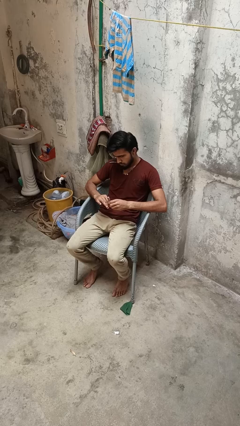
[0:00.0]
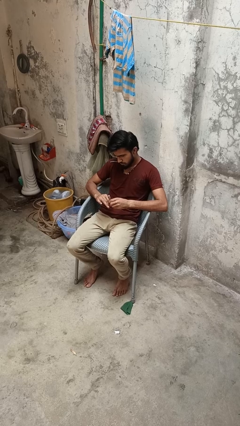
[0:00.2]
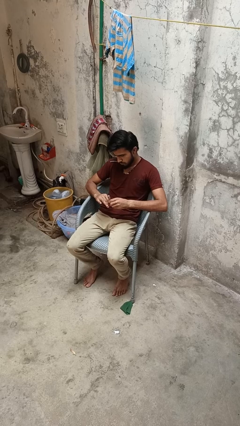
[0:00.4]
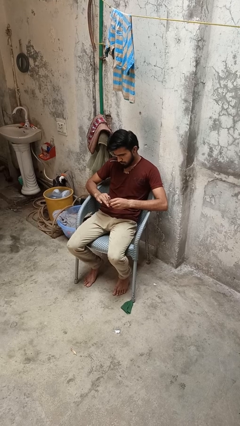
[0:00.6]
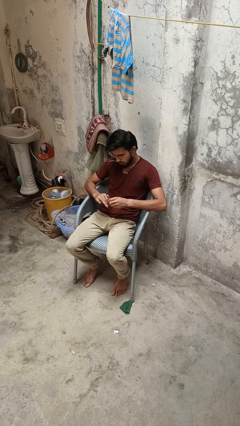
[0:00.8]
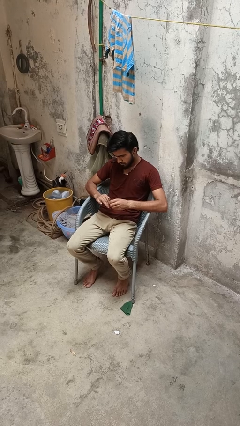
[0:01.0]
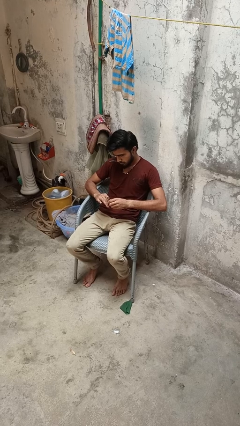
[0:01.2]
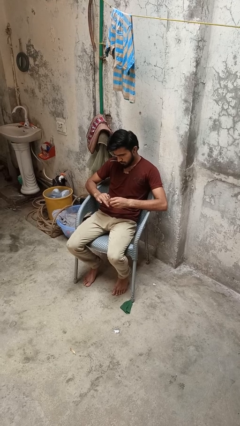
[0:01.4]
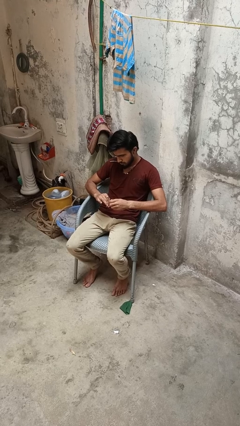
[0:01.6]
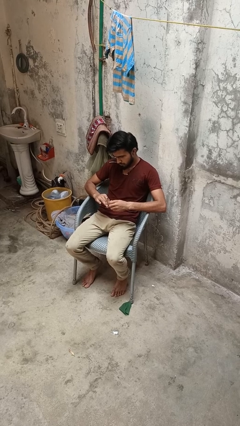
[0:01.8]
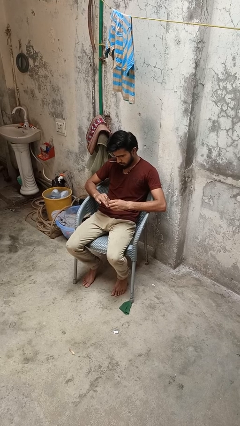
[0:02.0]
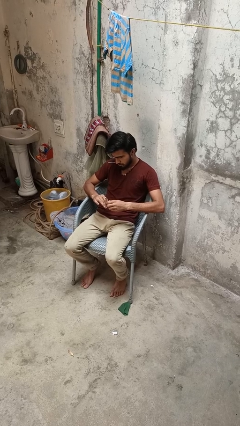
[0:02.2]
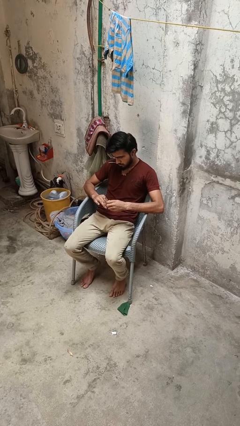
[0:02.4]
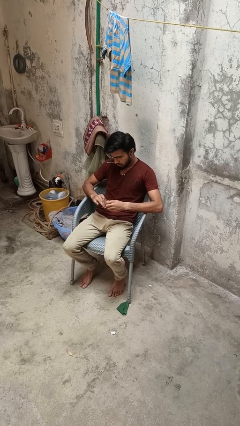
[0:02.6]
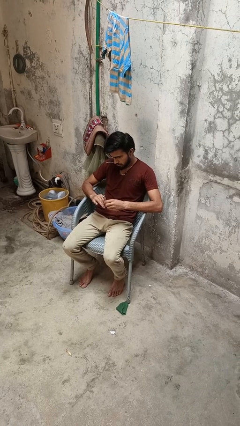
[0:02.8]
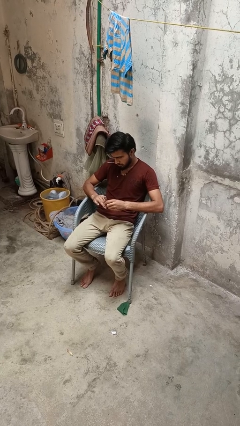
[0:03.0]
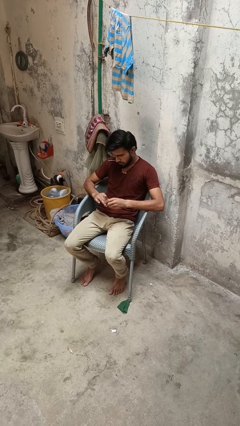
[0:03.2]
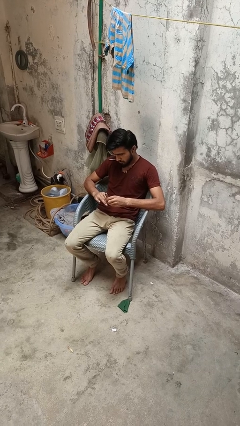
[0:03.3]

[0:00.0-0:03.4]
person files fingernails

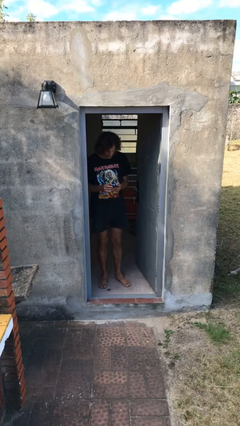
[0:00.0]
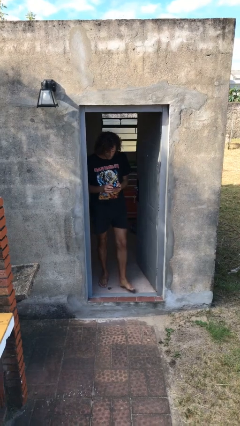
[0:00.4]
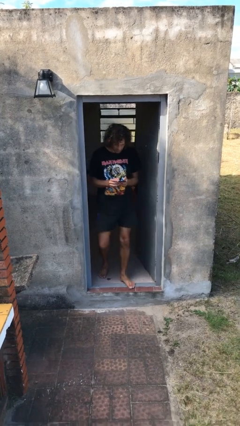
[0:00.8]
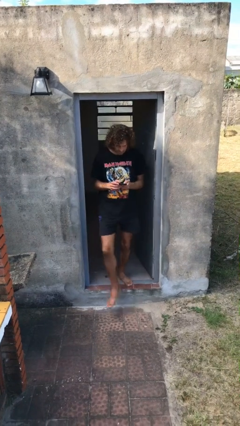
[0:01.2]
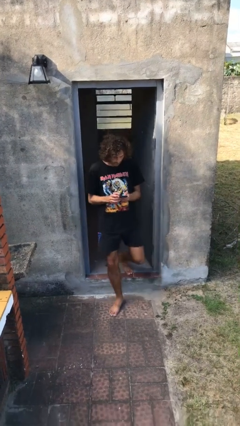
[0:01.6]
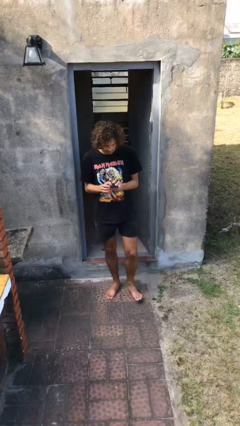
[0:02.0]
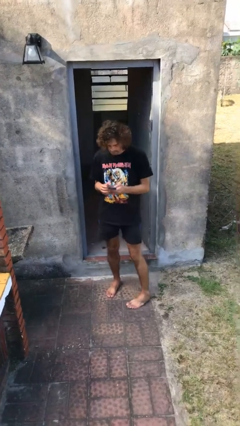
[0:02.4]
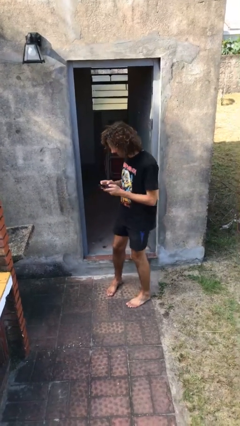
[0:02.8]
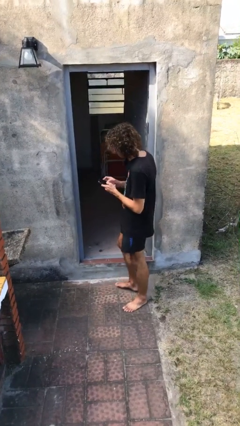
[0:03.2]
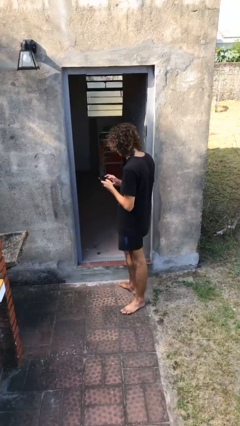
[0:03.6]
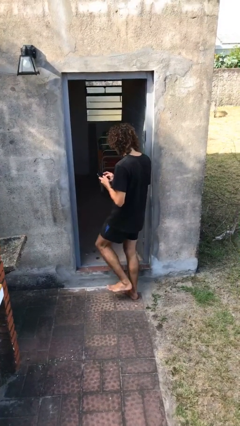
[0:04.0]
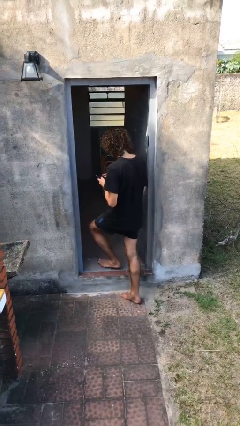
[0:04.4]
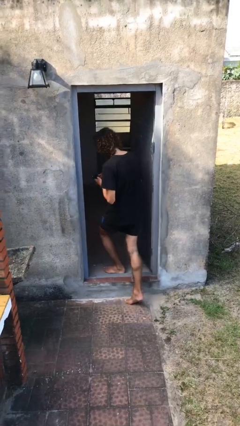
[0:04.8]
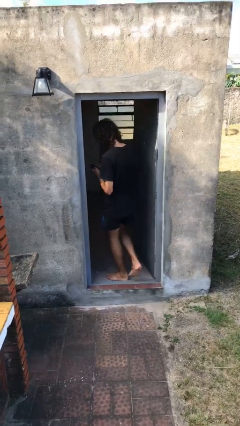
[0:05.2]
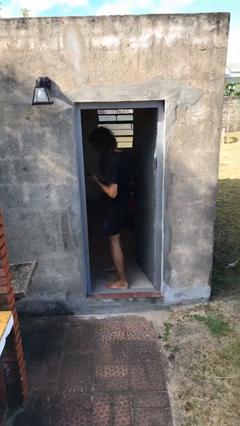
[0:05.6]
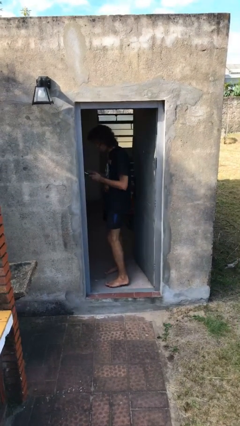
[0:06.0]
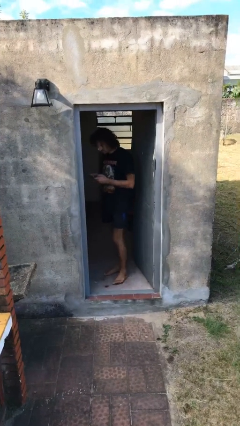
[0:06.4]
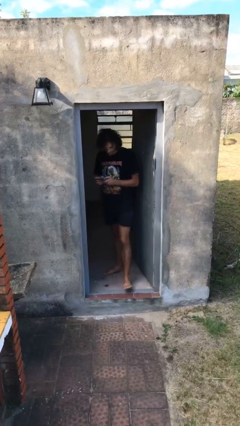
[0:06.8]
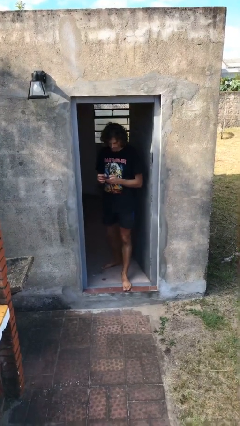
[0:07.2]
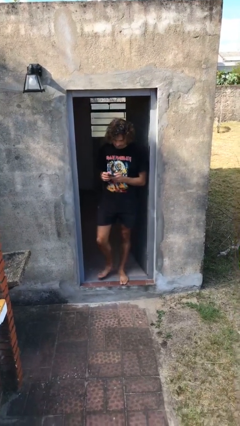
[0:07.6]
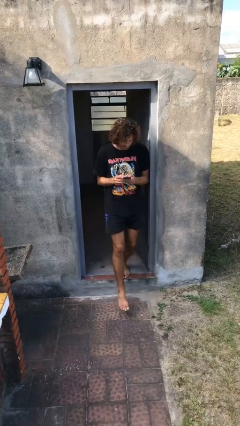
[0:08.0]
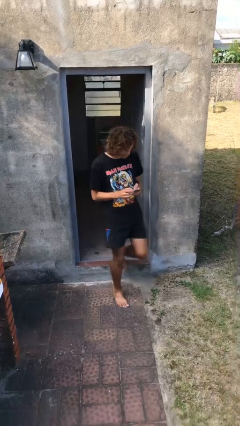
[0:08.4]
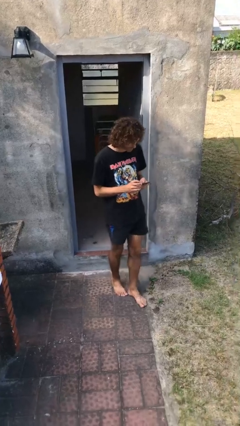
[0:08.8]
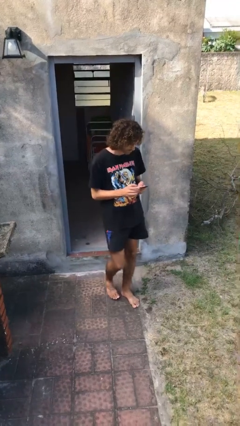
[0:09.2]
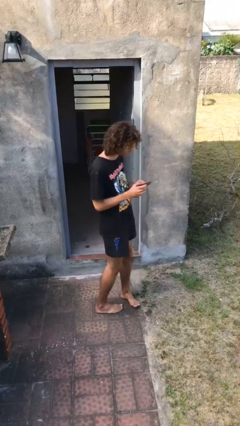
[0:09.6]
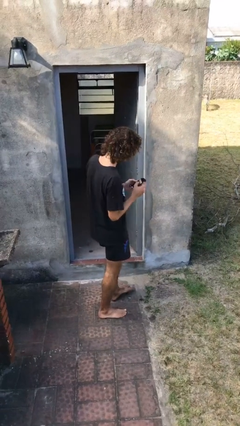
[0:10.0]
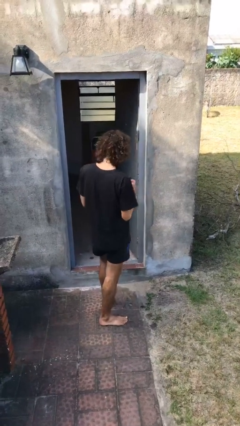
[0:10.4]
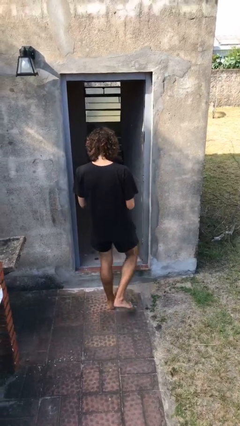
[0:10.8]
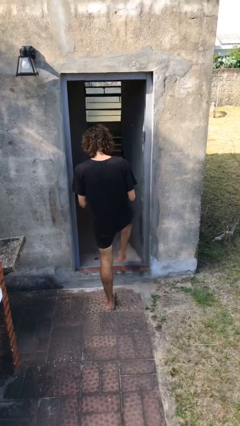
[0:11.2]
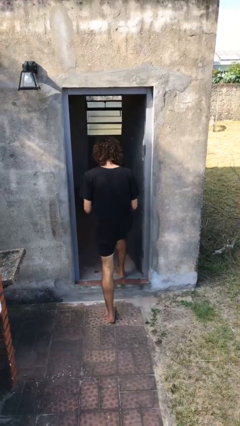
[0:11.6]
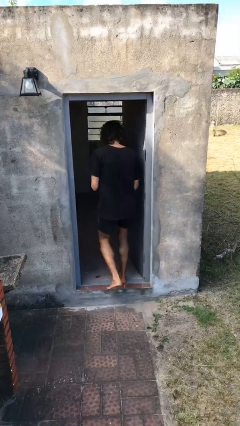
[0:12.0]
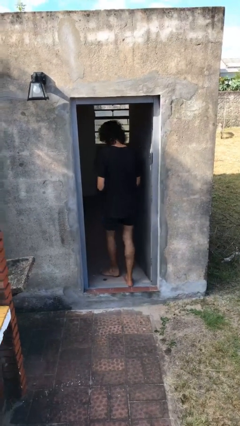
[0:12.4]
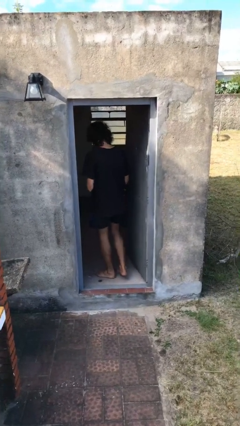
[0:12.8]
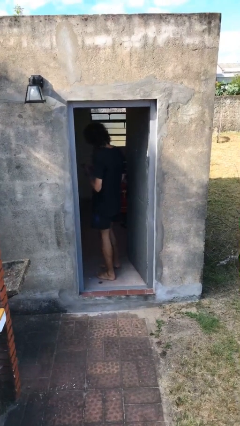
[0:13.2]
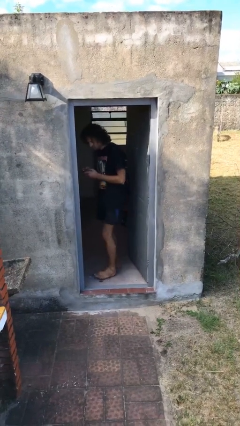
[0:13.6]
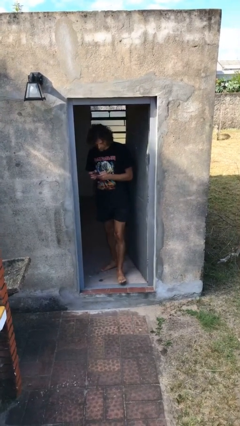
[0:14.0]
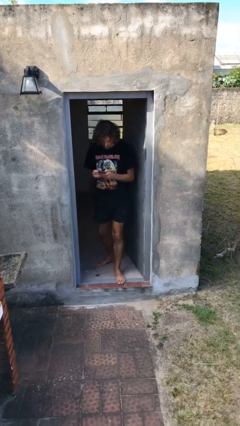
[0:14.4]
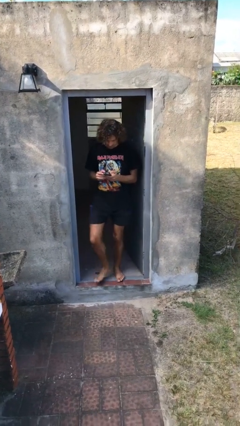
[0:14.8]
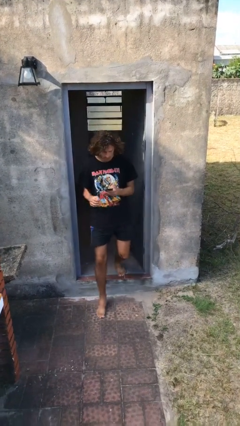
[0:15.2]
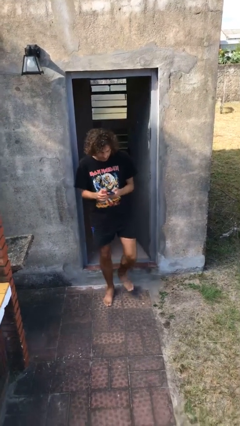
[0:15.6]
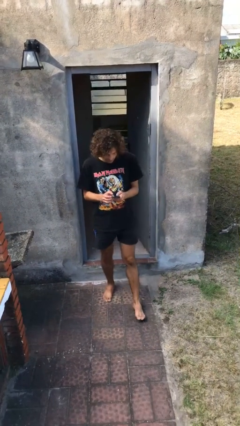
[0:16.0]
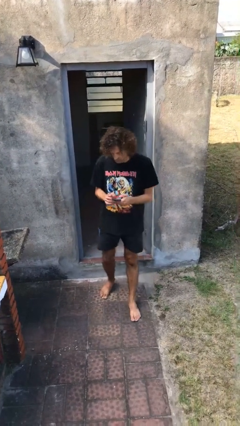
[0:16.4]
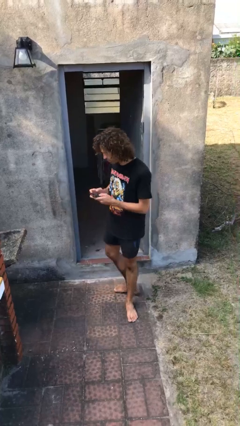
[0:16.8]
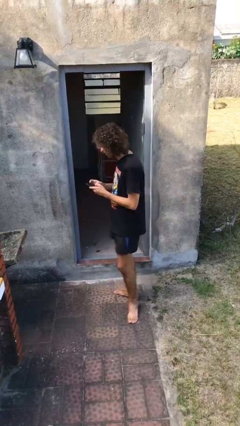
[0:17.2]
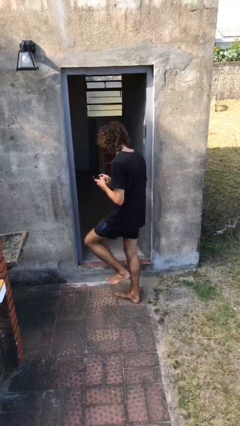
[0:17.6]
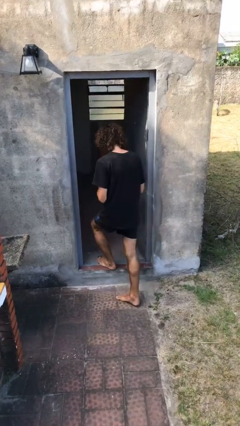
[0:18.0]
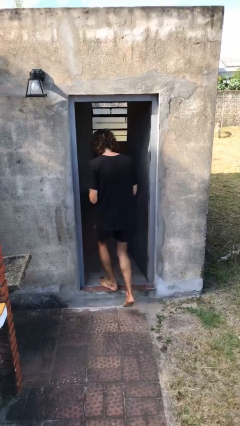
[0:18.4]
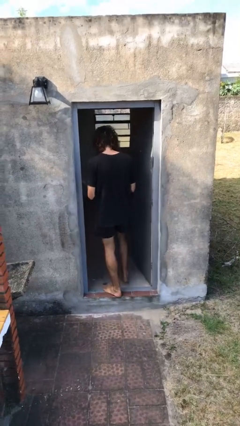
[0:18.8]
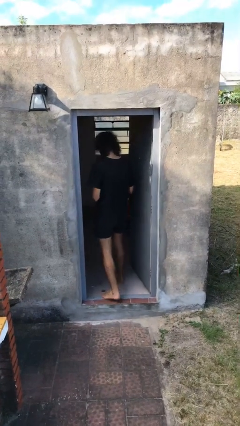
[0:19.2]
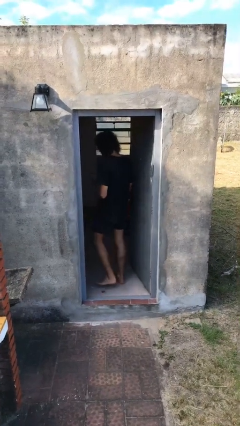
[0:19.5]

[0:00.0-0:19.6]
person texts on phone

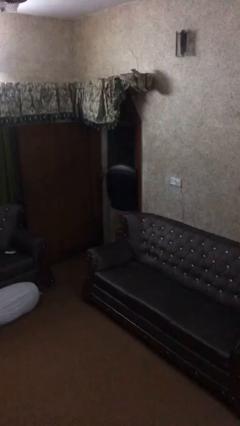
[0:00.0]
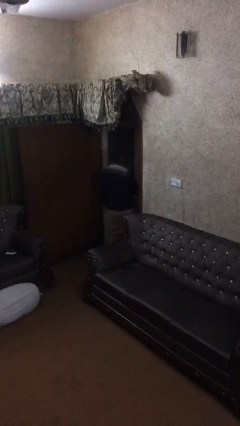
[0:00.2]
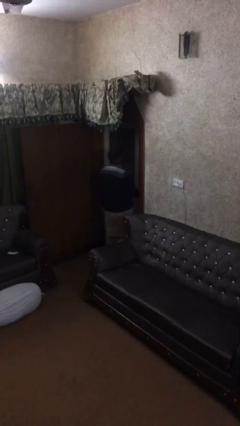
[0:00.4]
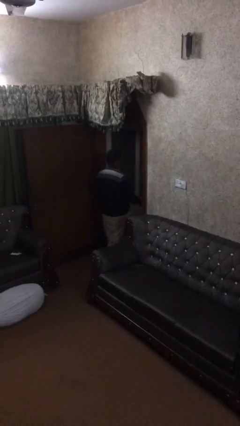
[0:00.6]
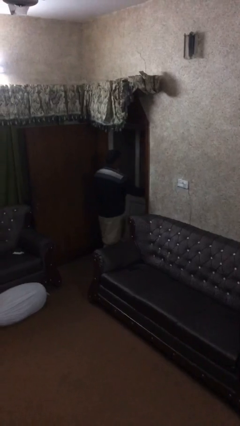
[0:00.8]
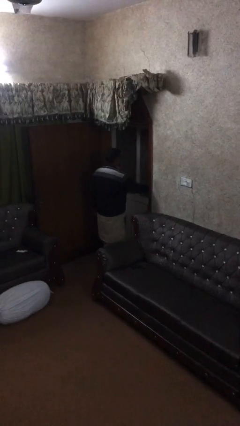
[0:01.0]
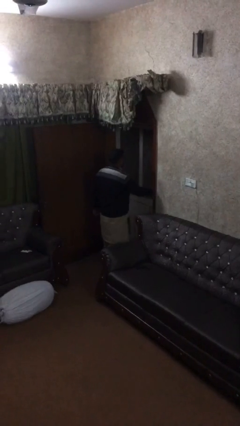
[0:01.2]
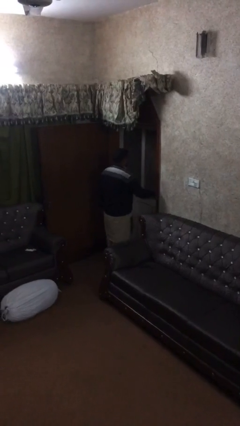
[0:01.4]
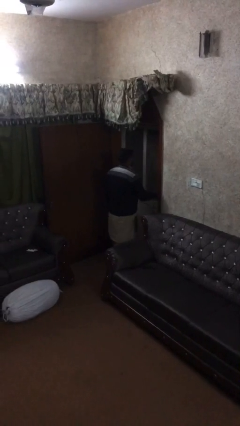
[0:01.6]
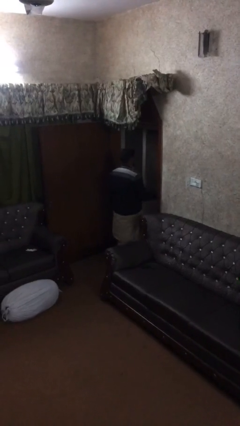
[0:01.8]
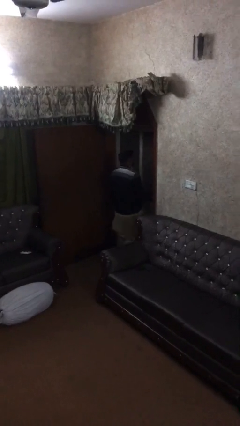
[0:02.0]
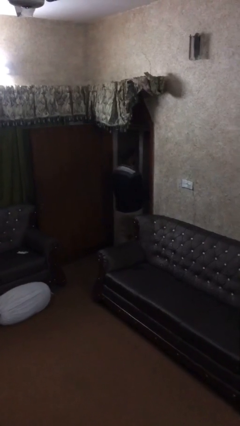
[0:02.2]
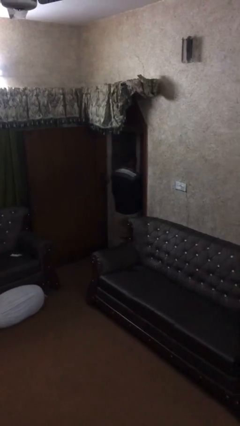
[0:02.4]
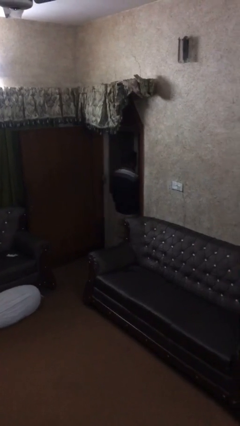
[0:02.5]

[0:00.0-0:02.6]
person closes facility door

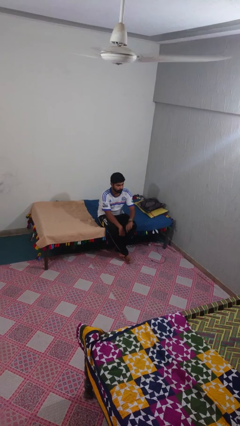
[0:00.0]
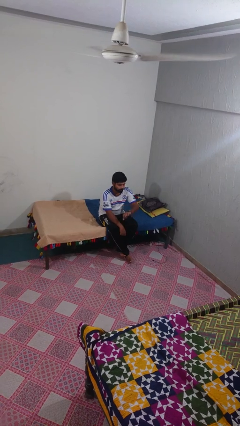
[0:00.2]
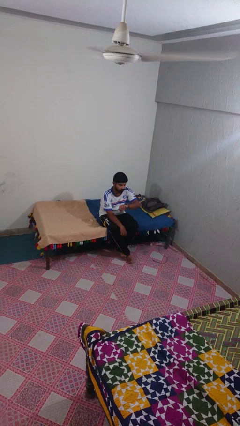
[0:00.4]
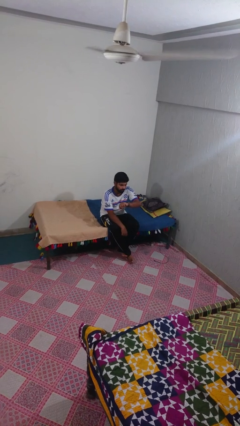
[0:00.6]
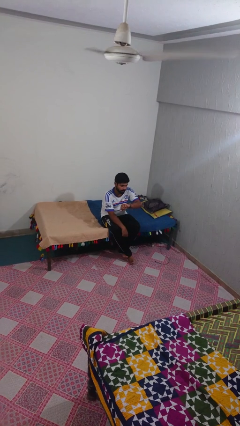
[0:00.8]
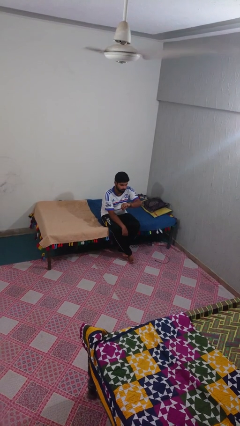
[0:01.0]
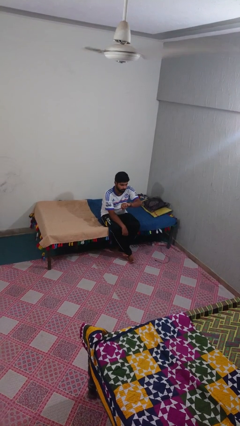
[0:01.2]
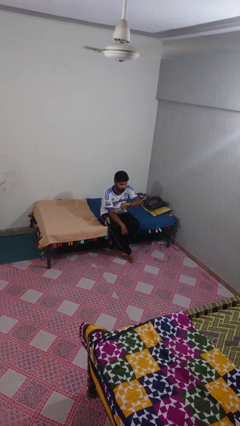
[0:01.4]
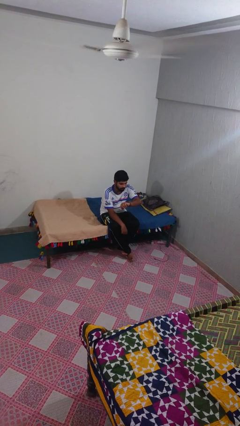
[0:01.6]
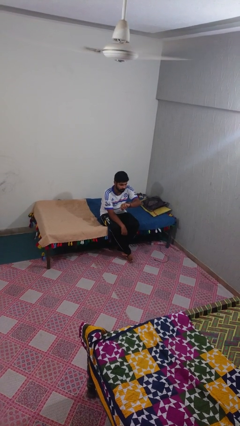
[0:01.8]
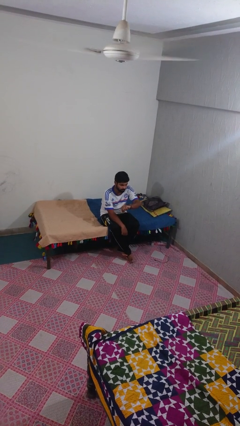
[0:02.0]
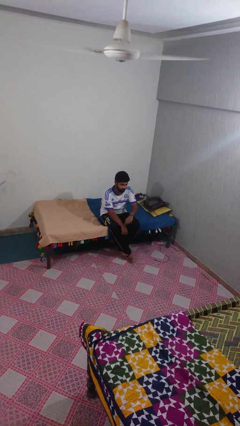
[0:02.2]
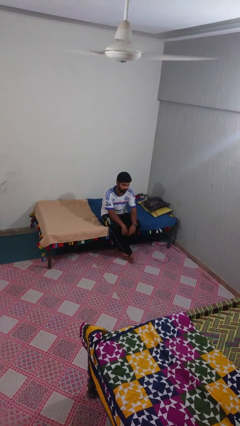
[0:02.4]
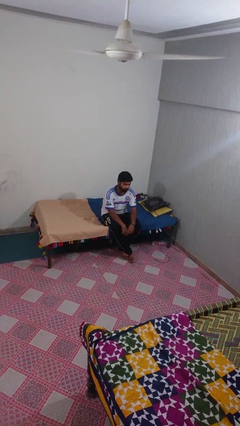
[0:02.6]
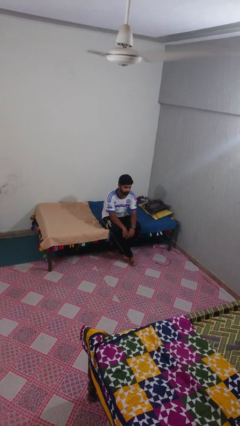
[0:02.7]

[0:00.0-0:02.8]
person looks at wristwatch
